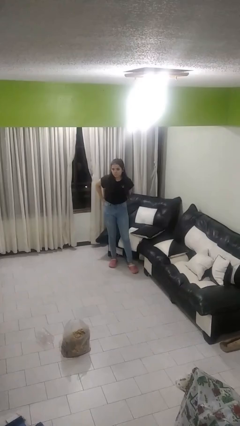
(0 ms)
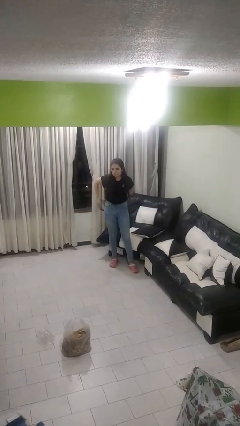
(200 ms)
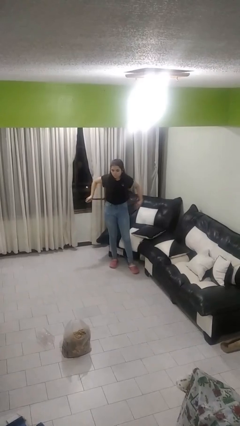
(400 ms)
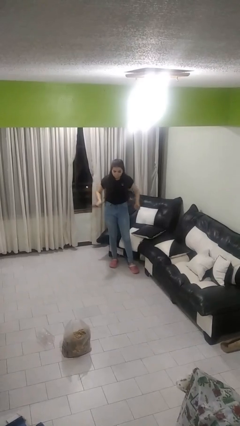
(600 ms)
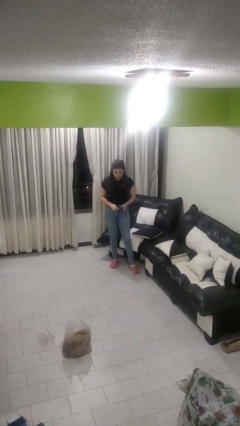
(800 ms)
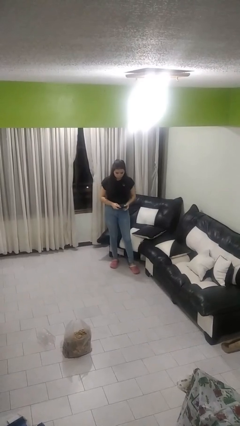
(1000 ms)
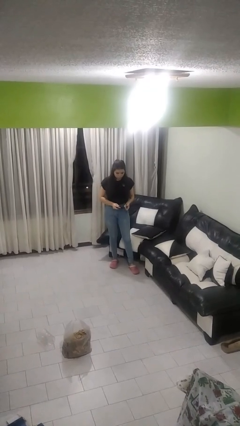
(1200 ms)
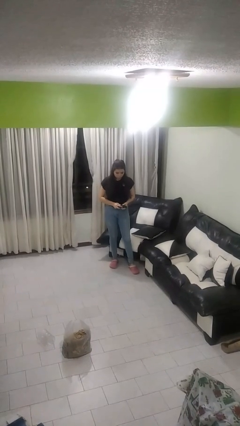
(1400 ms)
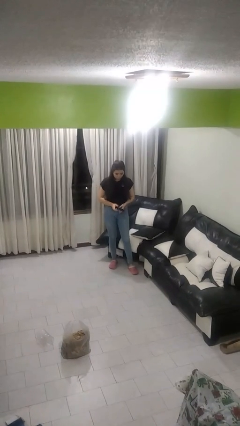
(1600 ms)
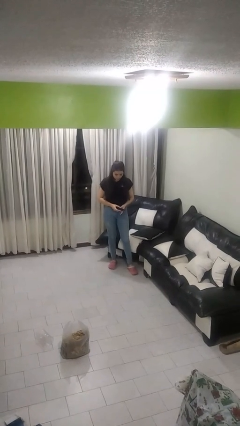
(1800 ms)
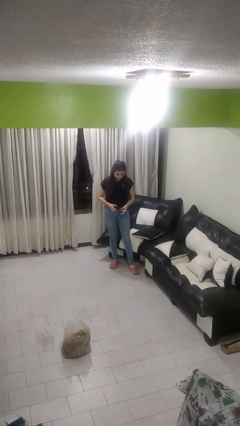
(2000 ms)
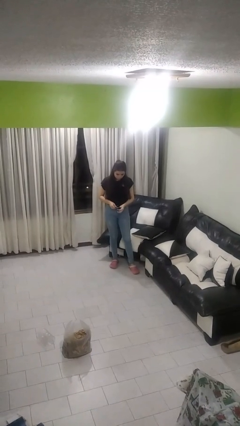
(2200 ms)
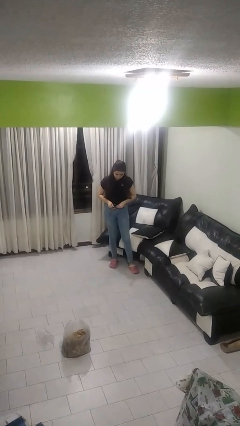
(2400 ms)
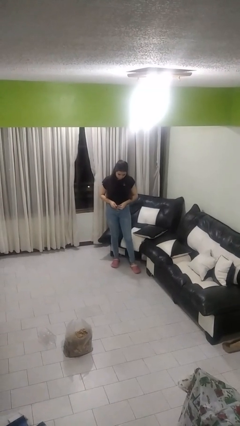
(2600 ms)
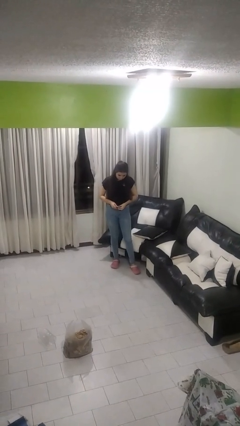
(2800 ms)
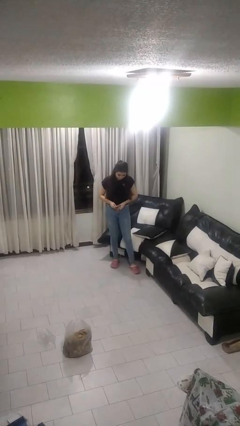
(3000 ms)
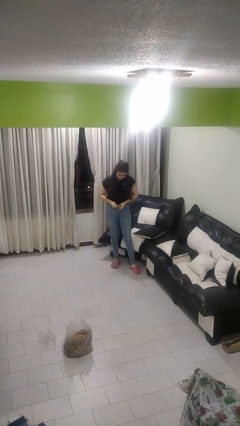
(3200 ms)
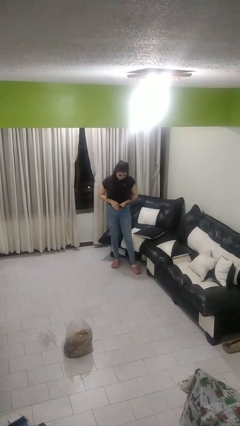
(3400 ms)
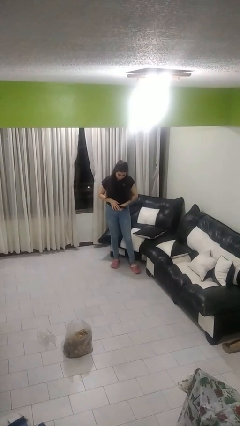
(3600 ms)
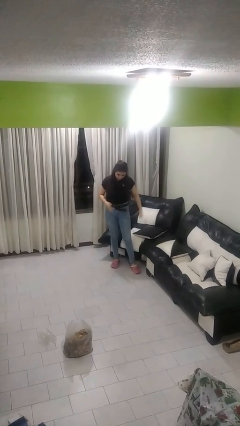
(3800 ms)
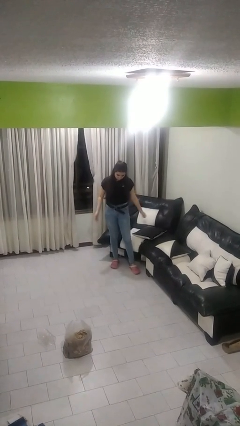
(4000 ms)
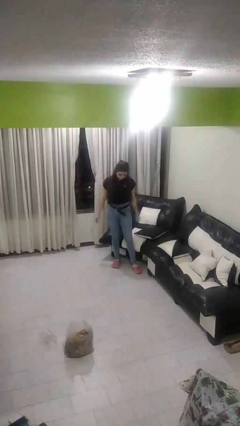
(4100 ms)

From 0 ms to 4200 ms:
person puts on belt

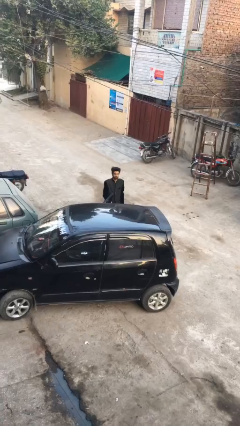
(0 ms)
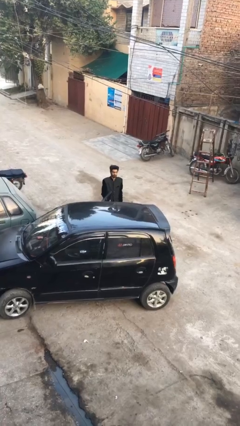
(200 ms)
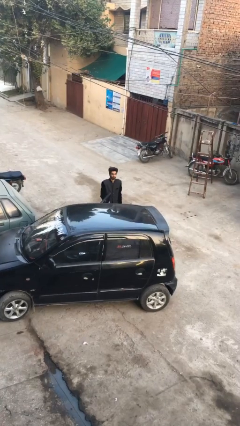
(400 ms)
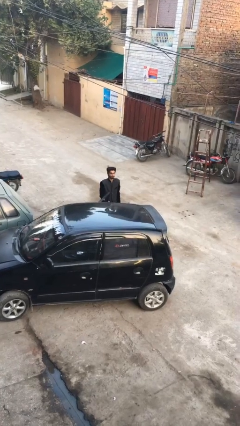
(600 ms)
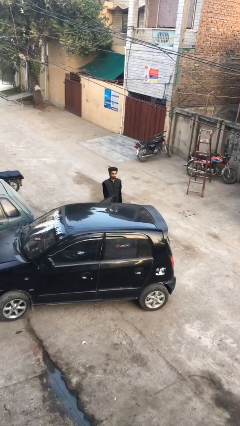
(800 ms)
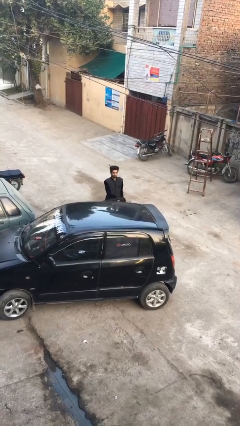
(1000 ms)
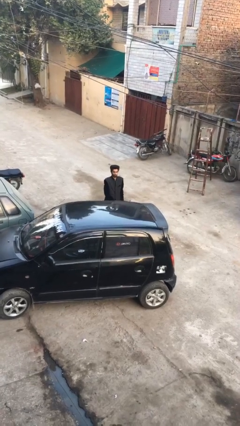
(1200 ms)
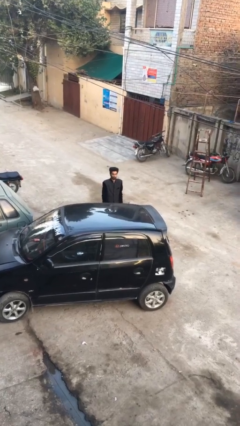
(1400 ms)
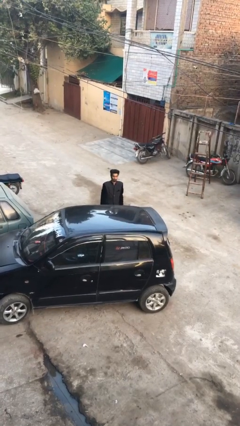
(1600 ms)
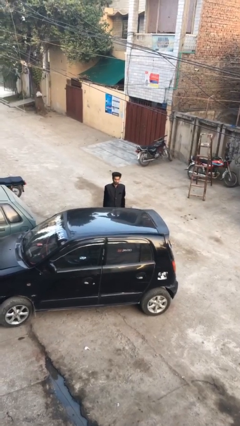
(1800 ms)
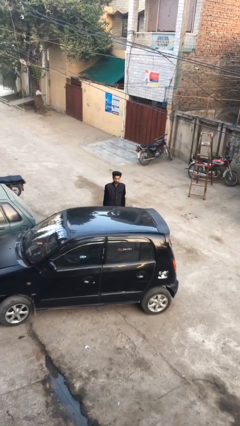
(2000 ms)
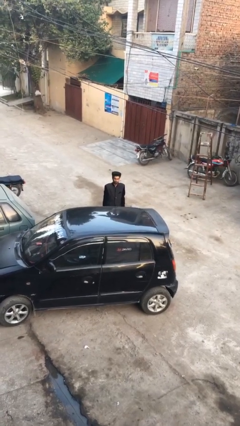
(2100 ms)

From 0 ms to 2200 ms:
person closes car door

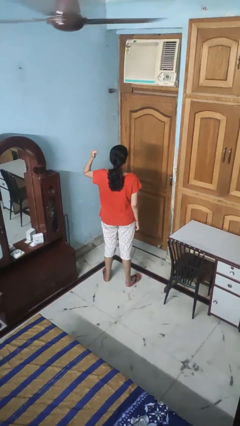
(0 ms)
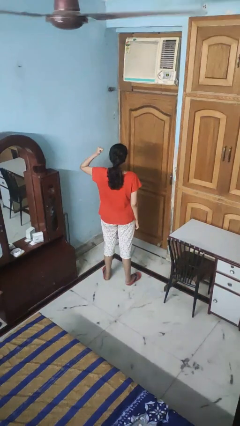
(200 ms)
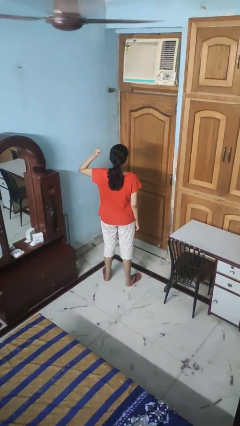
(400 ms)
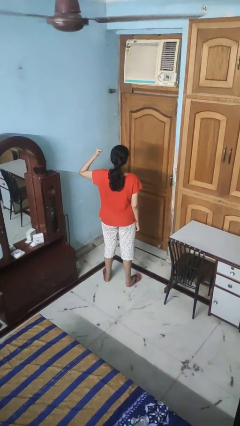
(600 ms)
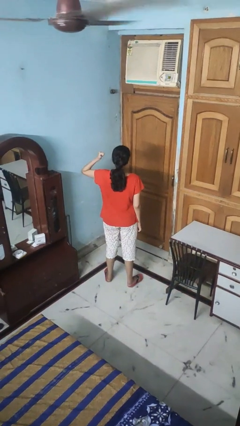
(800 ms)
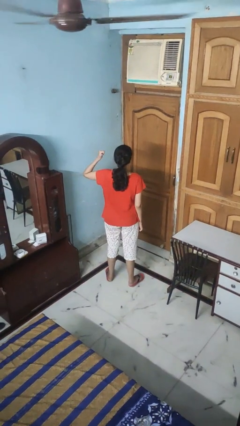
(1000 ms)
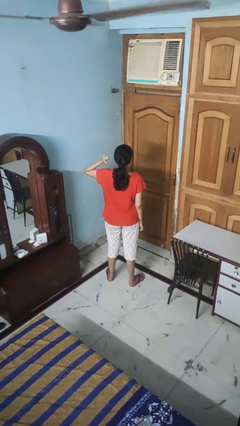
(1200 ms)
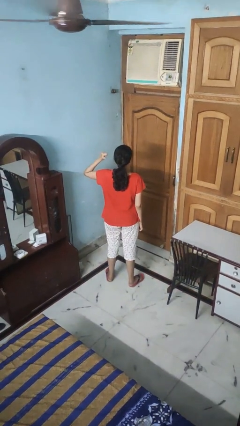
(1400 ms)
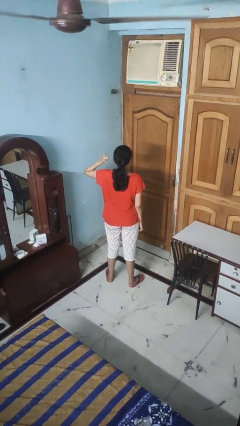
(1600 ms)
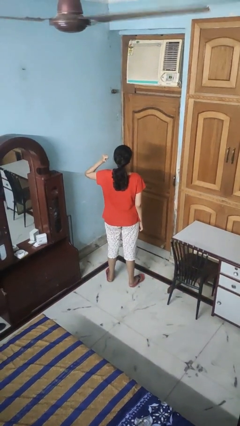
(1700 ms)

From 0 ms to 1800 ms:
person gestures behind me

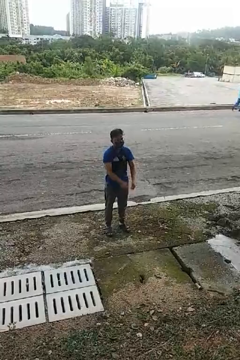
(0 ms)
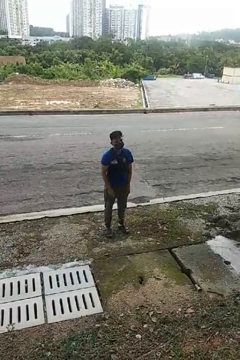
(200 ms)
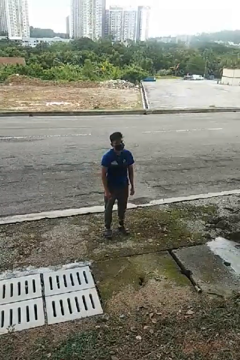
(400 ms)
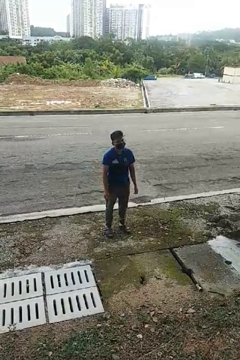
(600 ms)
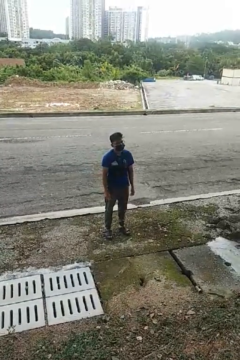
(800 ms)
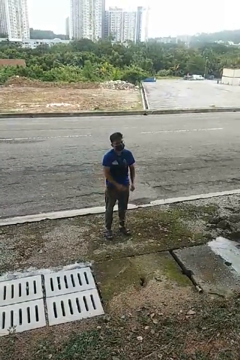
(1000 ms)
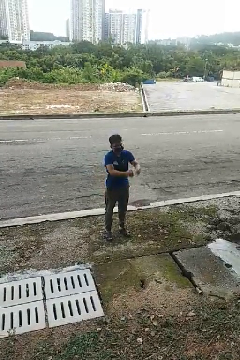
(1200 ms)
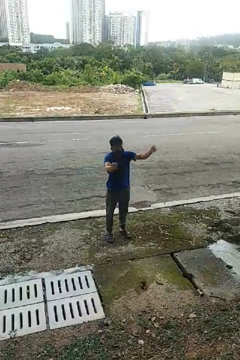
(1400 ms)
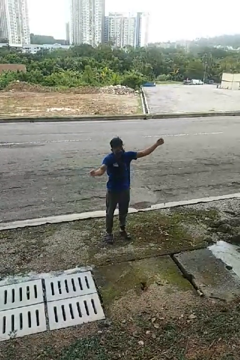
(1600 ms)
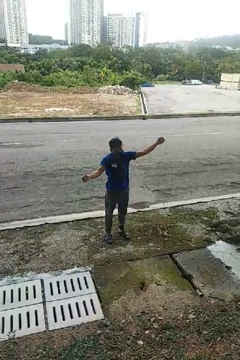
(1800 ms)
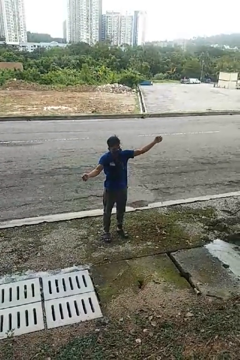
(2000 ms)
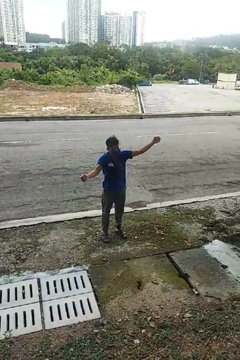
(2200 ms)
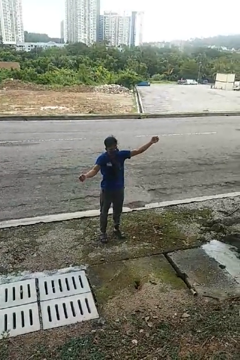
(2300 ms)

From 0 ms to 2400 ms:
person gestures zoom in

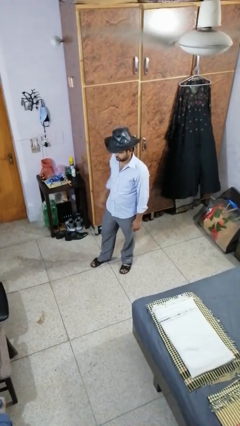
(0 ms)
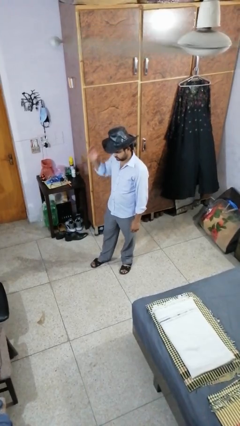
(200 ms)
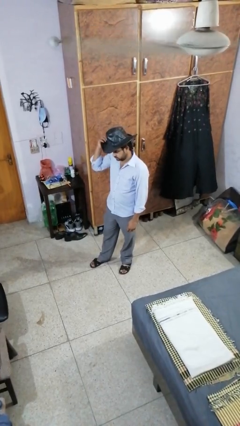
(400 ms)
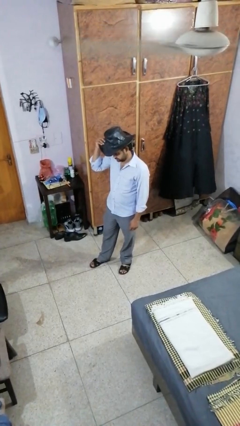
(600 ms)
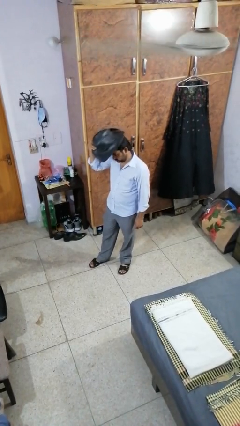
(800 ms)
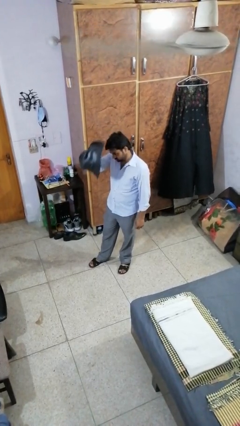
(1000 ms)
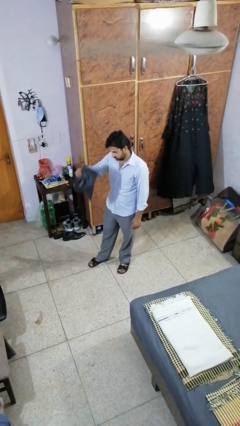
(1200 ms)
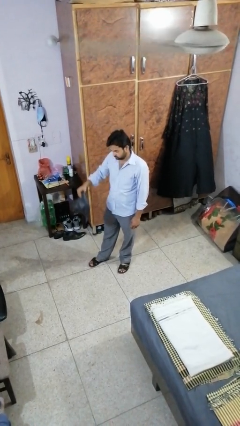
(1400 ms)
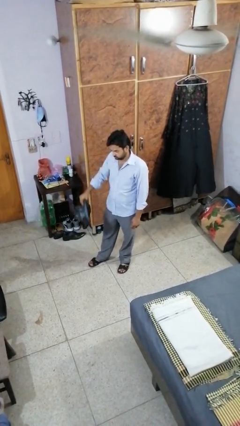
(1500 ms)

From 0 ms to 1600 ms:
person takes off hat

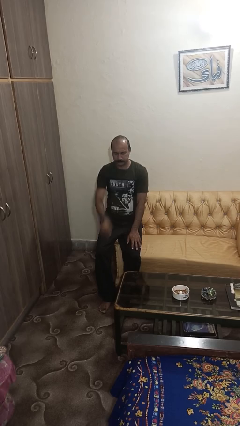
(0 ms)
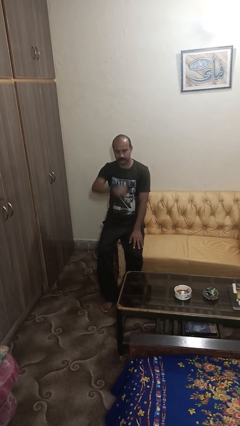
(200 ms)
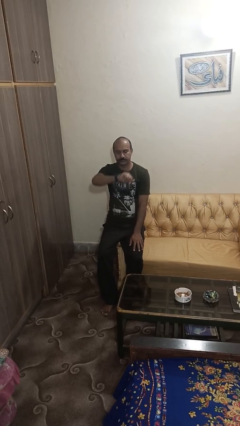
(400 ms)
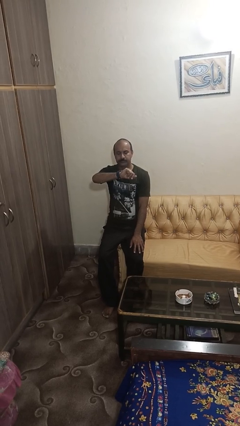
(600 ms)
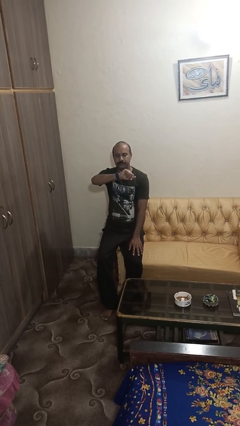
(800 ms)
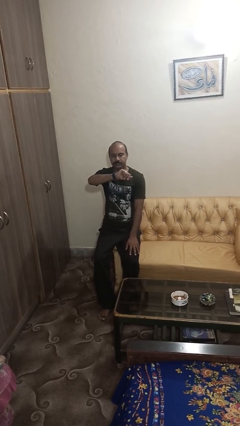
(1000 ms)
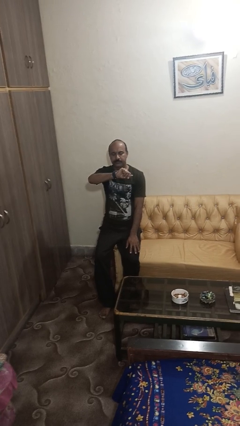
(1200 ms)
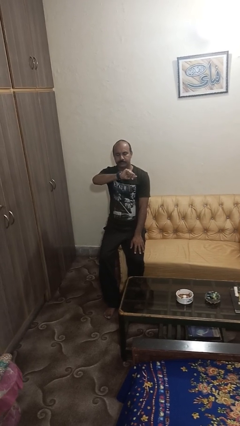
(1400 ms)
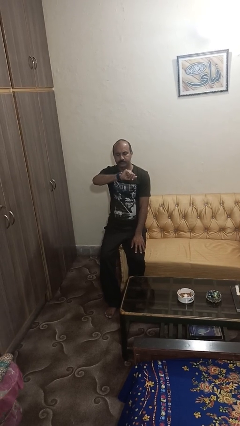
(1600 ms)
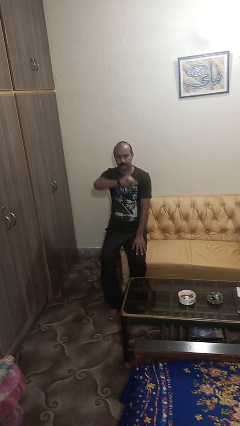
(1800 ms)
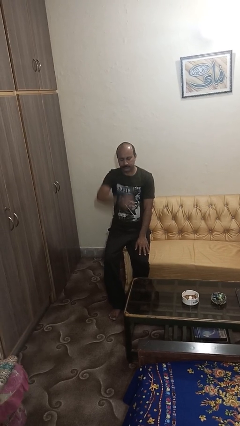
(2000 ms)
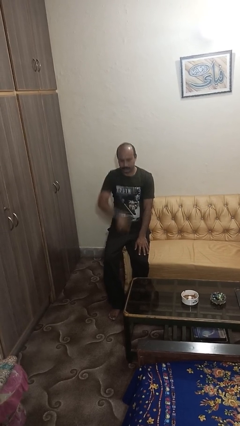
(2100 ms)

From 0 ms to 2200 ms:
person looks at wristwatch

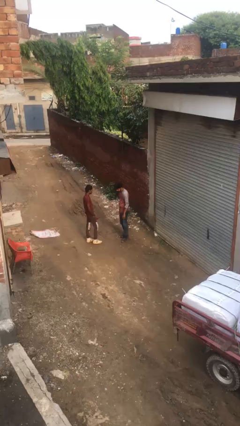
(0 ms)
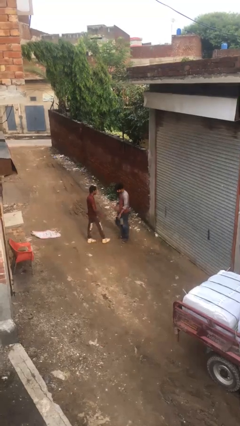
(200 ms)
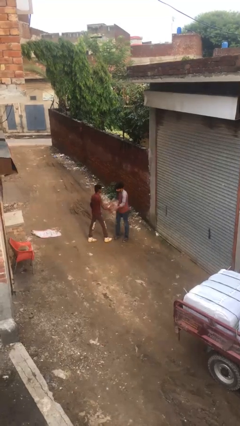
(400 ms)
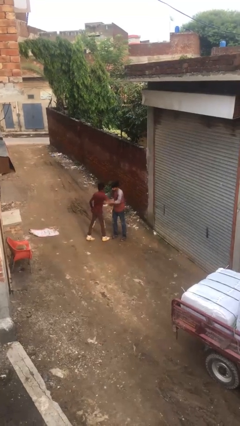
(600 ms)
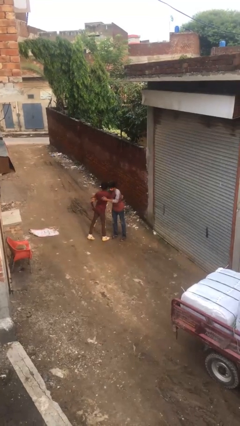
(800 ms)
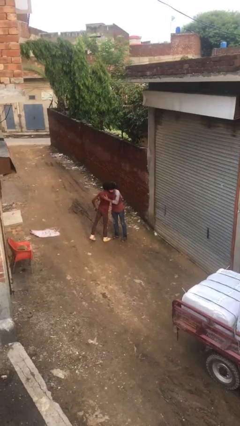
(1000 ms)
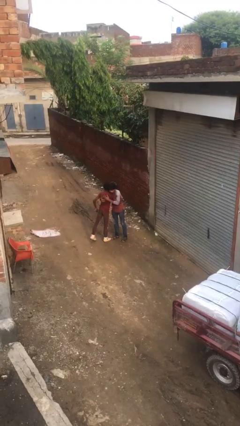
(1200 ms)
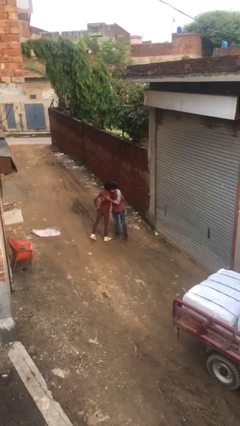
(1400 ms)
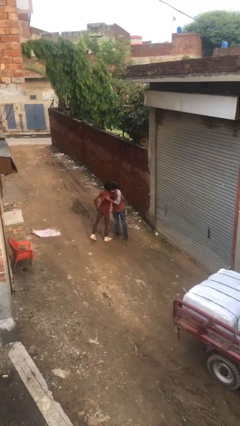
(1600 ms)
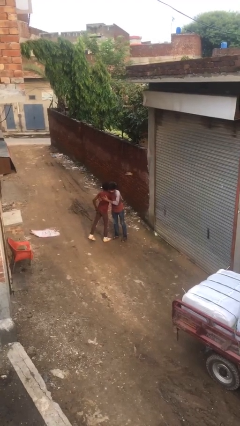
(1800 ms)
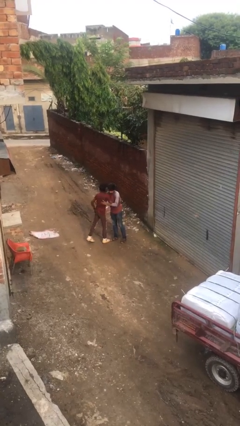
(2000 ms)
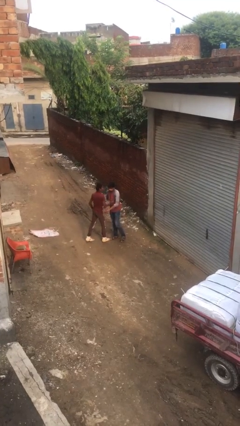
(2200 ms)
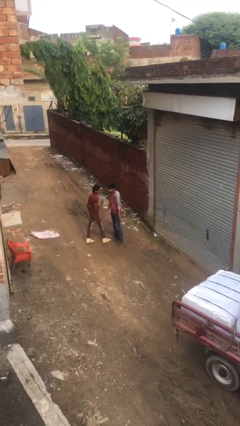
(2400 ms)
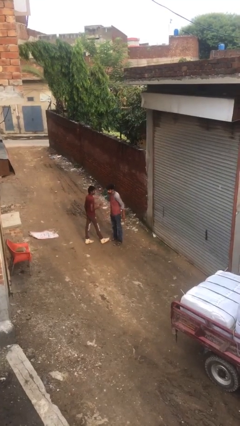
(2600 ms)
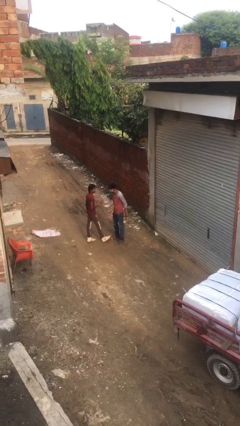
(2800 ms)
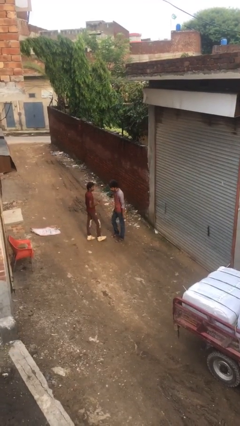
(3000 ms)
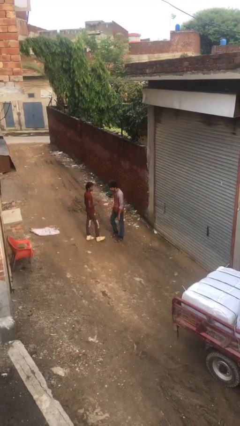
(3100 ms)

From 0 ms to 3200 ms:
person embraces person
